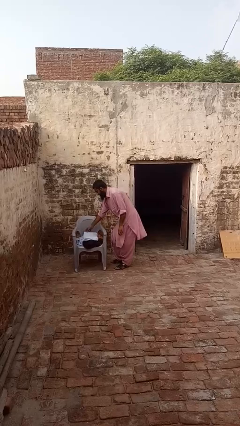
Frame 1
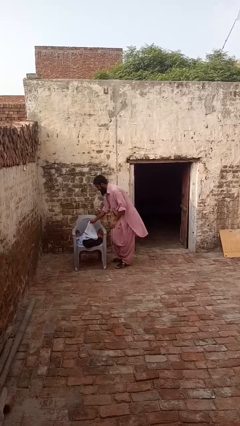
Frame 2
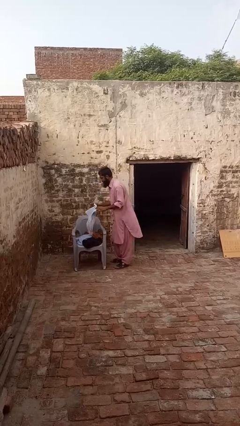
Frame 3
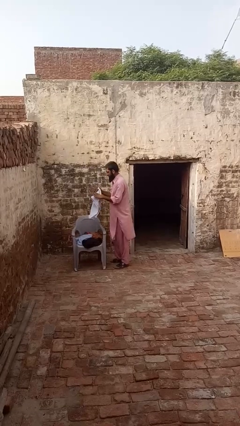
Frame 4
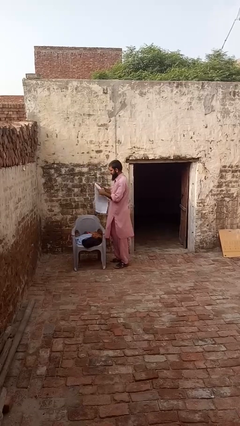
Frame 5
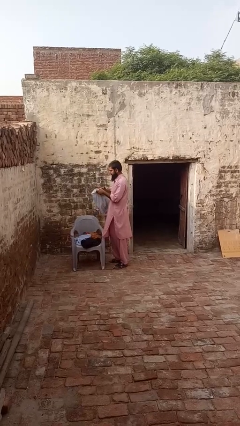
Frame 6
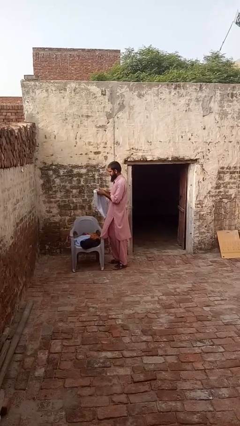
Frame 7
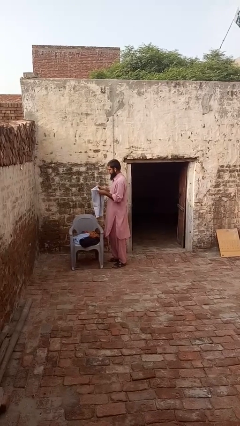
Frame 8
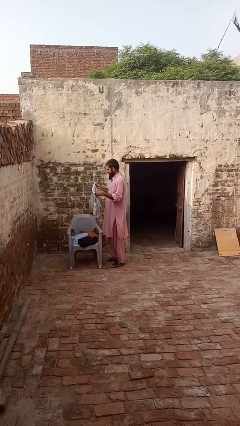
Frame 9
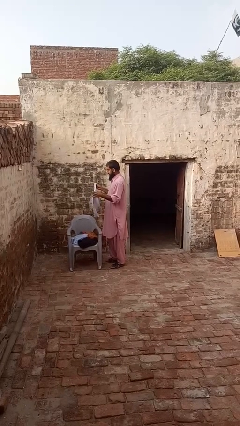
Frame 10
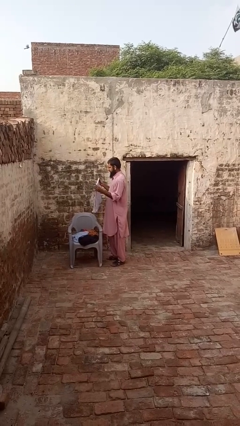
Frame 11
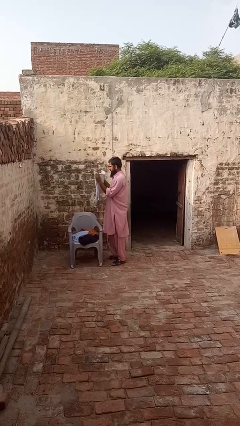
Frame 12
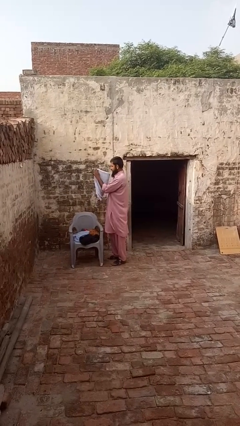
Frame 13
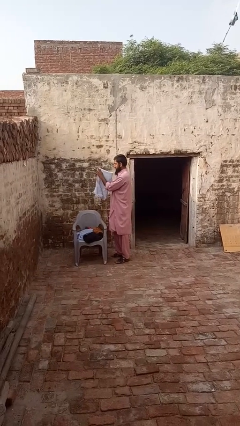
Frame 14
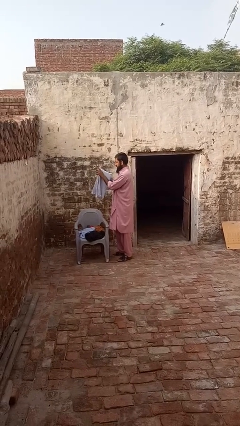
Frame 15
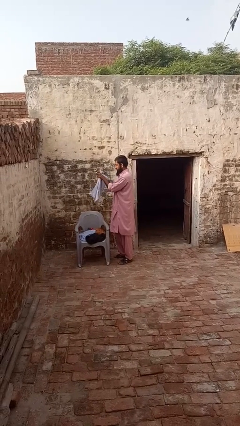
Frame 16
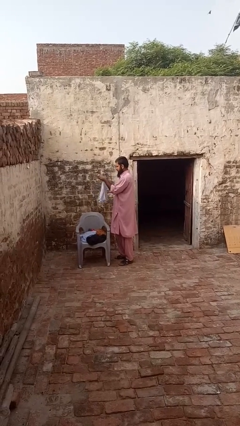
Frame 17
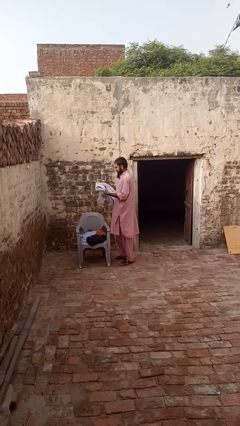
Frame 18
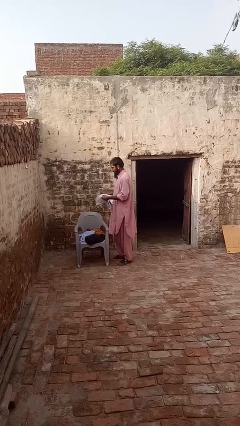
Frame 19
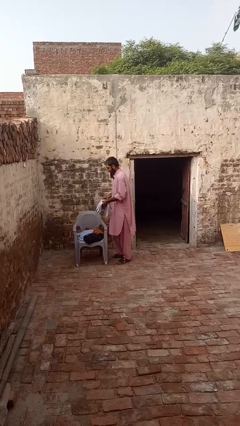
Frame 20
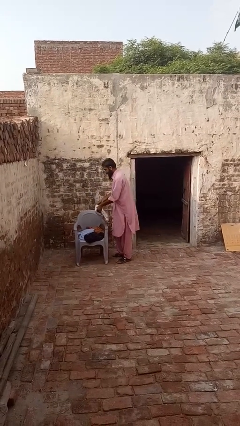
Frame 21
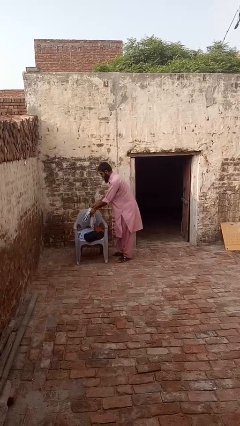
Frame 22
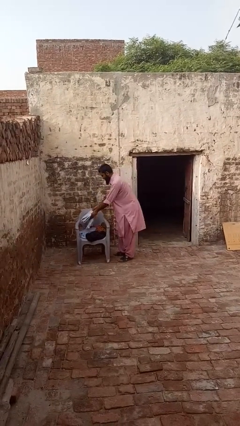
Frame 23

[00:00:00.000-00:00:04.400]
person folds towel

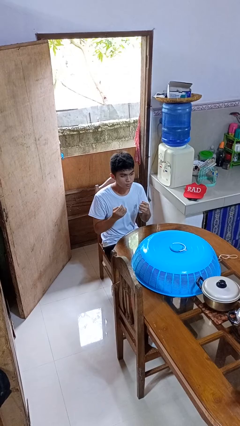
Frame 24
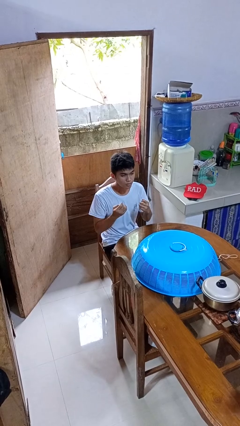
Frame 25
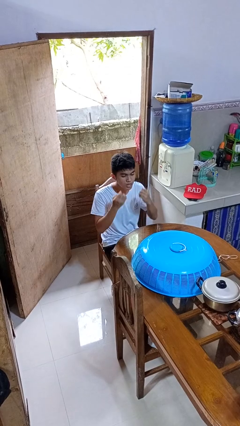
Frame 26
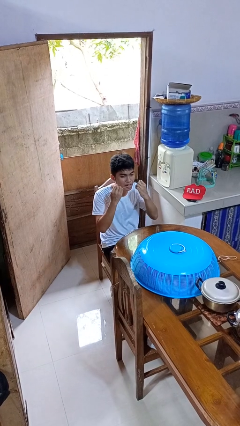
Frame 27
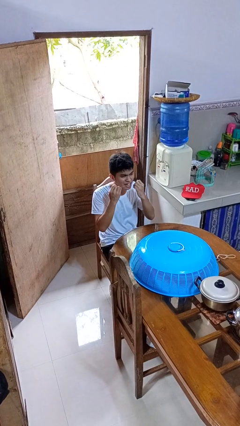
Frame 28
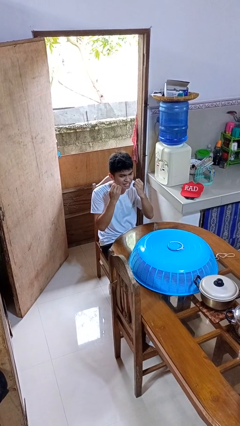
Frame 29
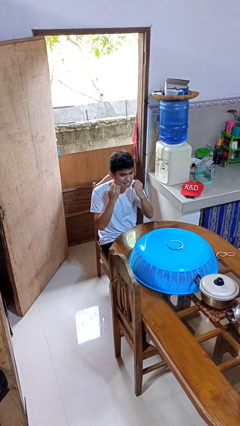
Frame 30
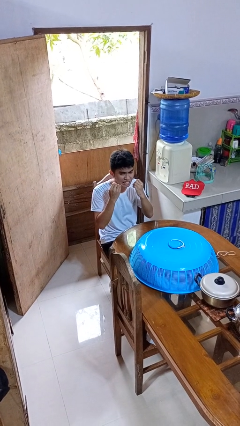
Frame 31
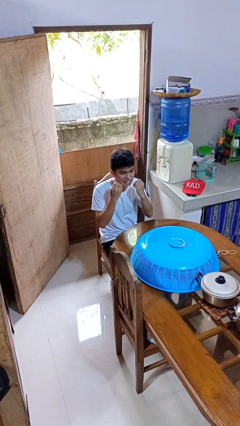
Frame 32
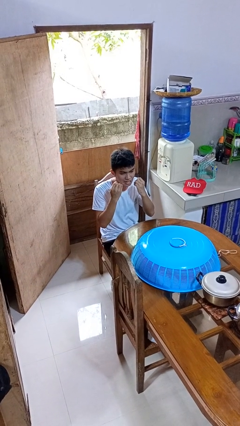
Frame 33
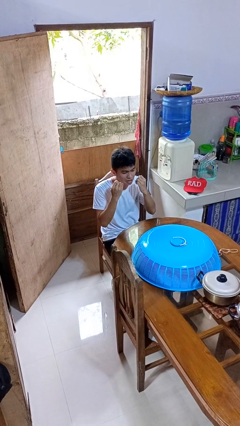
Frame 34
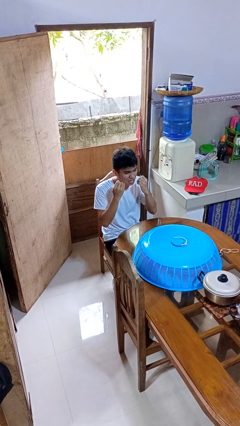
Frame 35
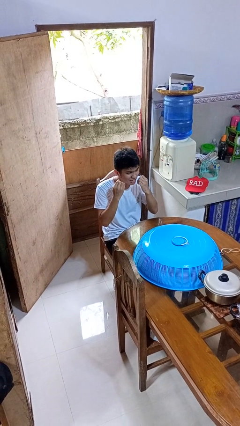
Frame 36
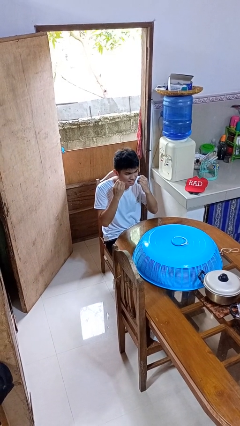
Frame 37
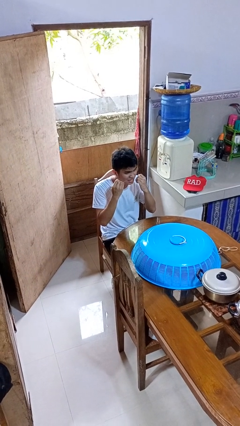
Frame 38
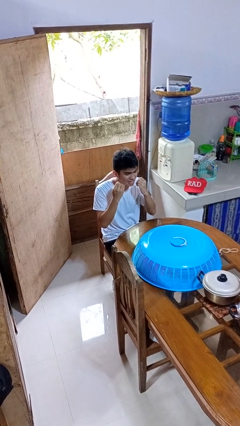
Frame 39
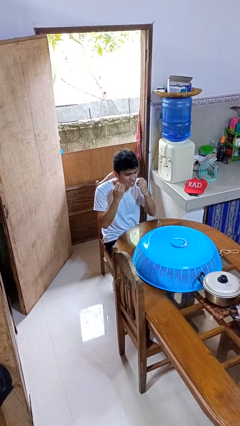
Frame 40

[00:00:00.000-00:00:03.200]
person flosses

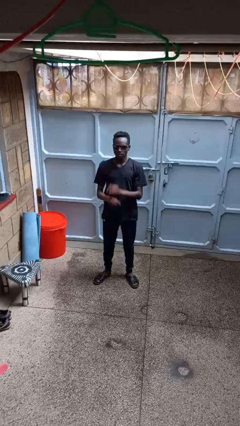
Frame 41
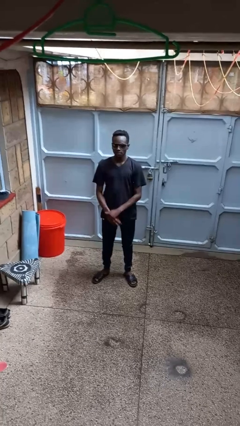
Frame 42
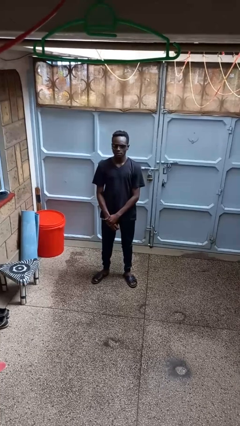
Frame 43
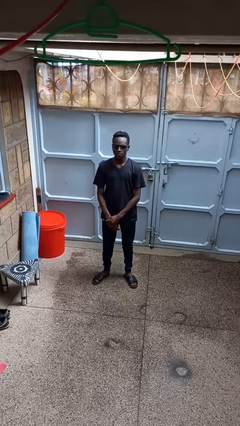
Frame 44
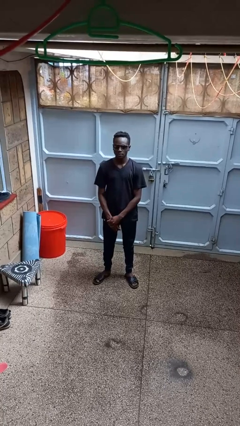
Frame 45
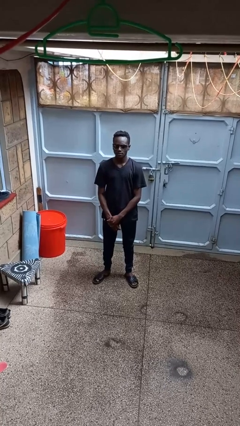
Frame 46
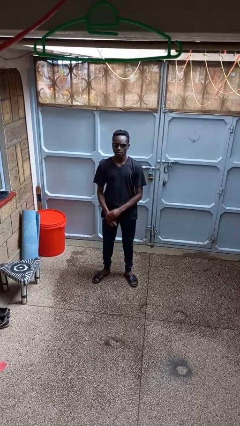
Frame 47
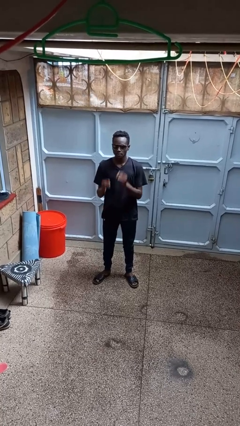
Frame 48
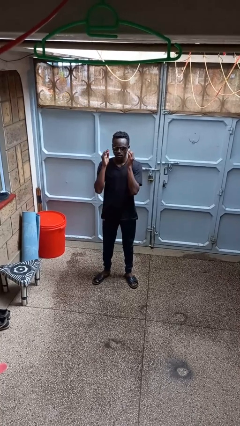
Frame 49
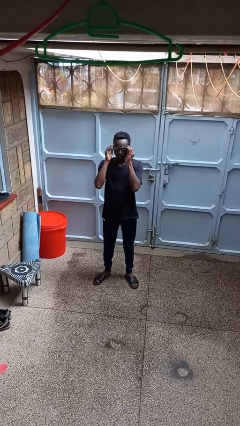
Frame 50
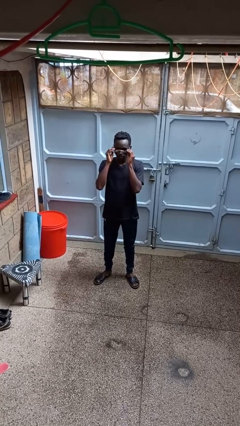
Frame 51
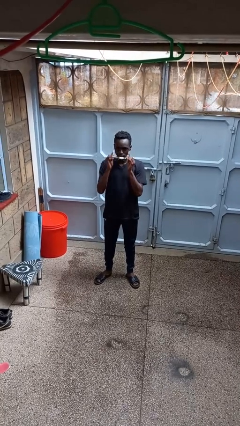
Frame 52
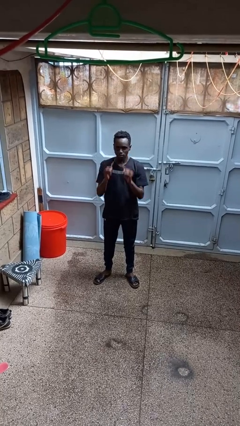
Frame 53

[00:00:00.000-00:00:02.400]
person takes off sunglasses

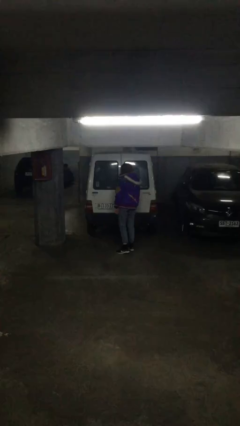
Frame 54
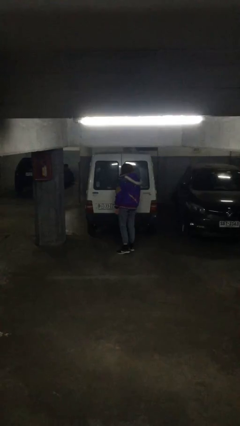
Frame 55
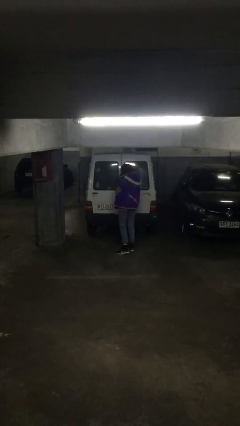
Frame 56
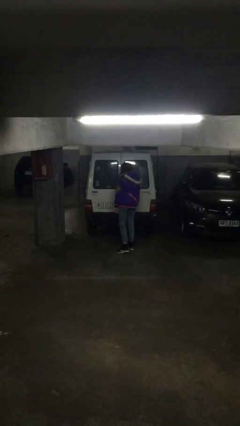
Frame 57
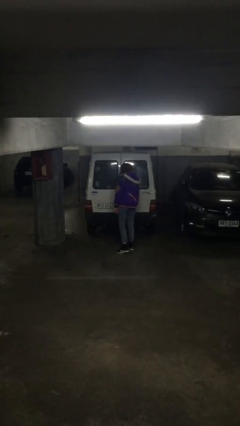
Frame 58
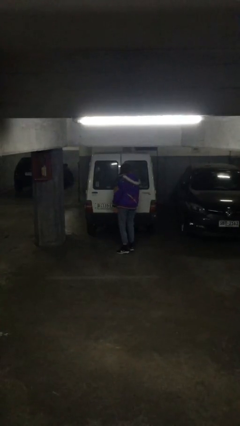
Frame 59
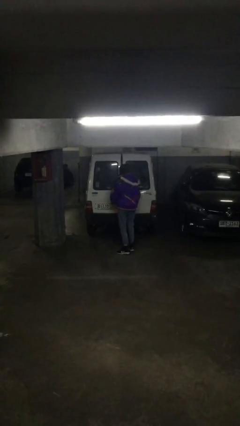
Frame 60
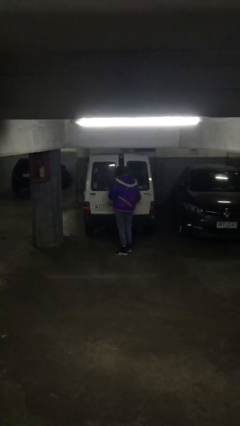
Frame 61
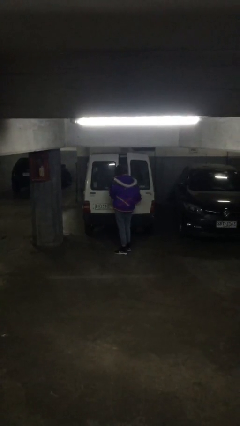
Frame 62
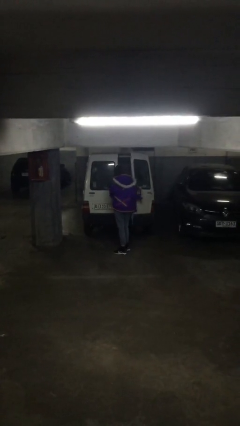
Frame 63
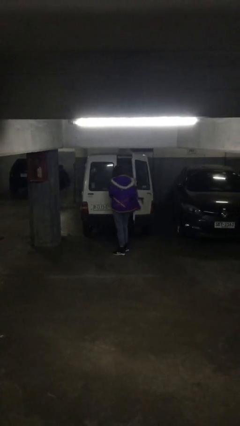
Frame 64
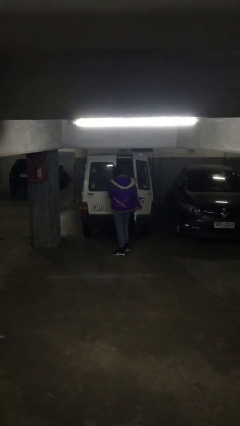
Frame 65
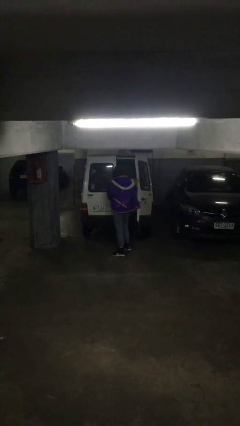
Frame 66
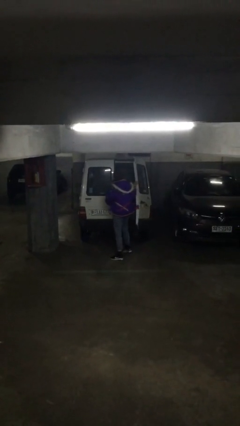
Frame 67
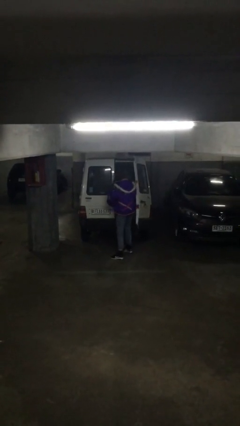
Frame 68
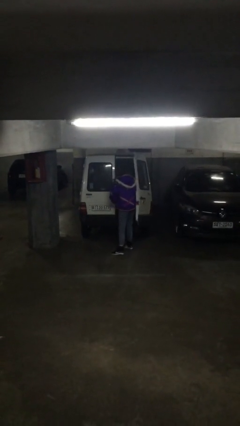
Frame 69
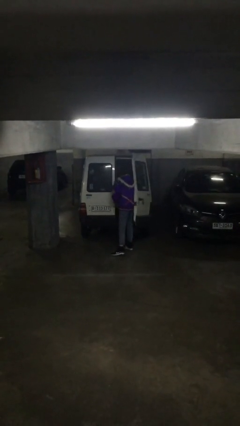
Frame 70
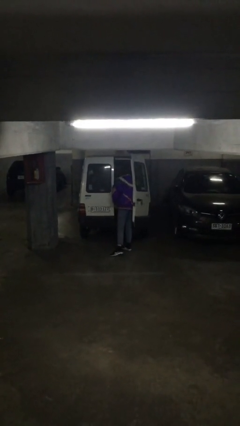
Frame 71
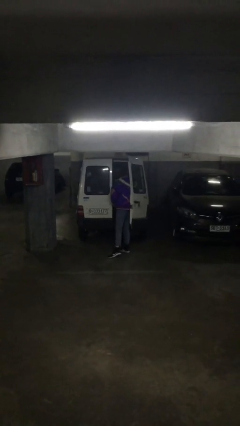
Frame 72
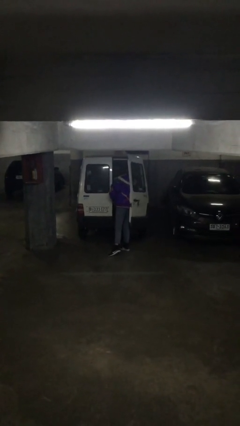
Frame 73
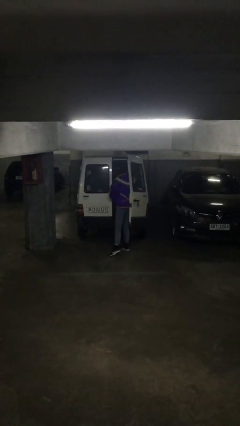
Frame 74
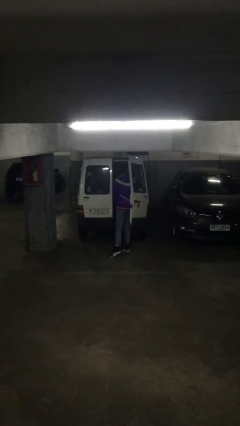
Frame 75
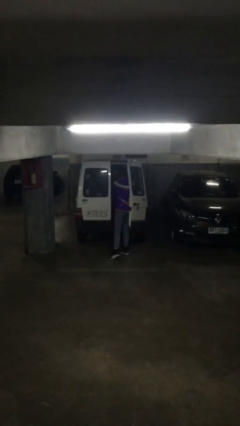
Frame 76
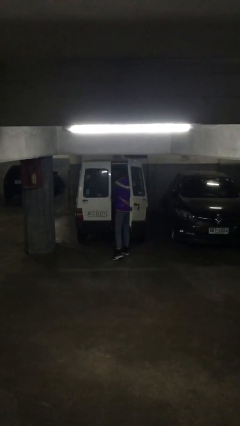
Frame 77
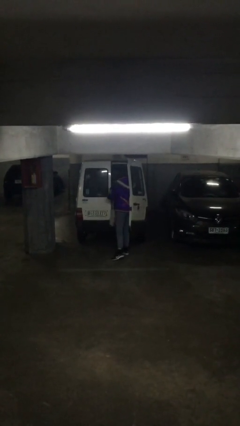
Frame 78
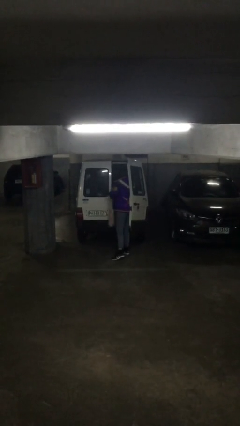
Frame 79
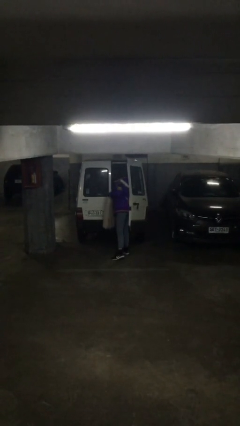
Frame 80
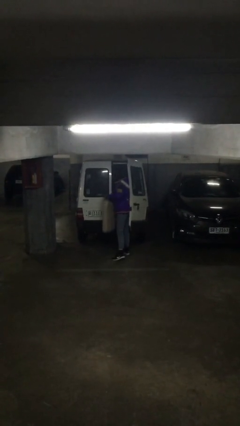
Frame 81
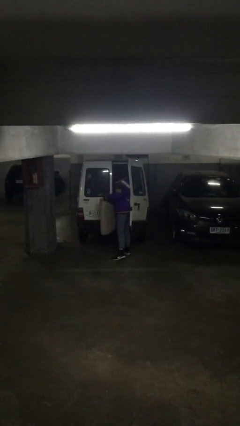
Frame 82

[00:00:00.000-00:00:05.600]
person opens car door

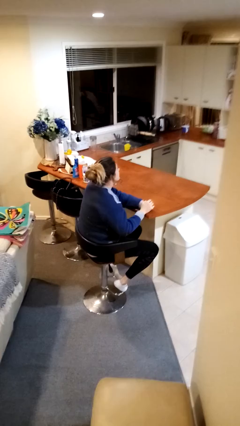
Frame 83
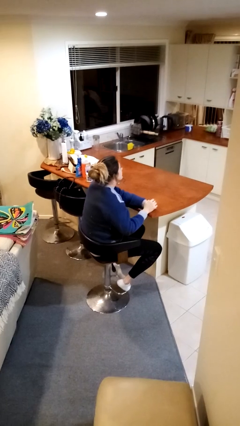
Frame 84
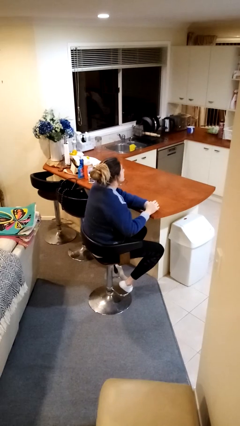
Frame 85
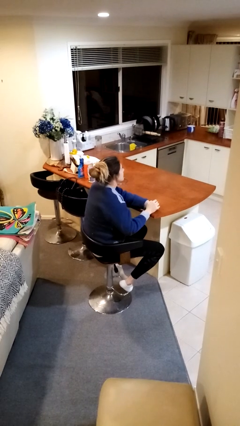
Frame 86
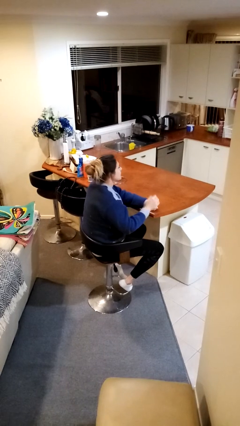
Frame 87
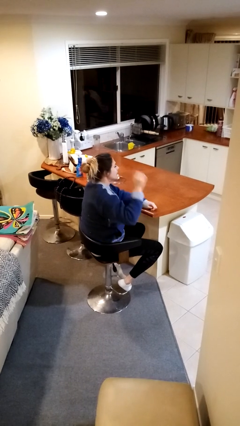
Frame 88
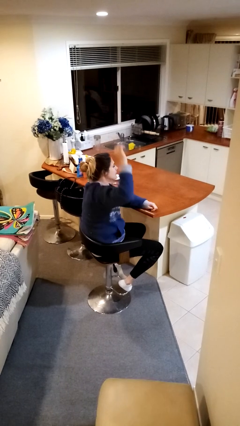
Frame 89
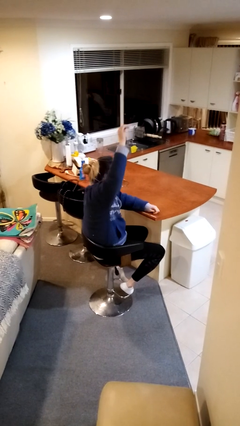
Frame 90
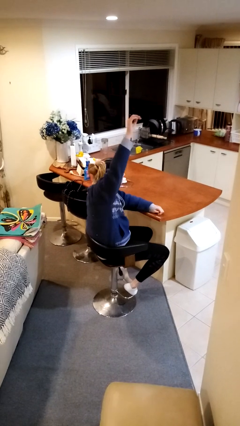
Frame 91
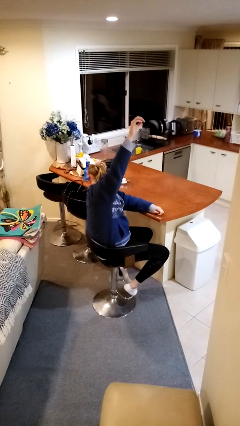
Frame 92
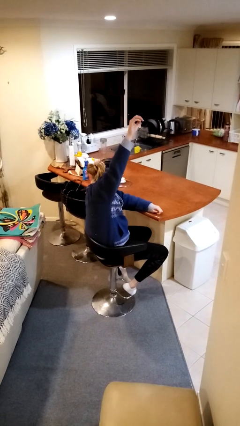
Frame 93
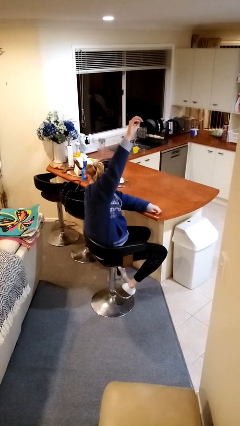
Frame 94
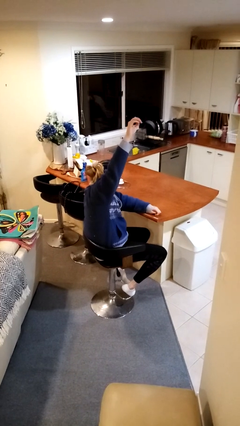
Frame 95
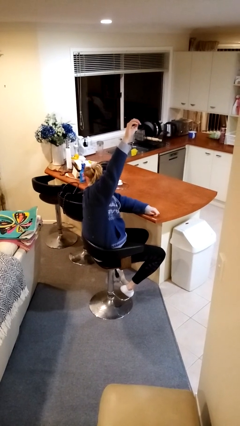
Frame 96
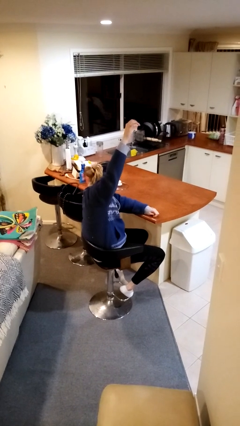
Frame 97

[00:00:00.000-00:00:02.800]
person gestures raise hand
